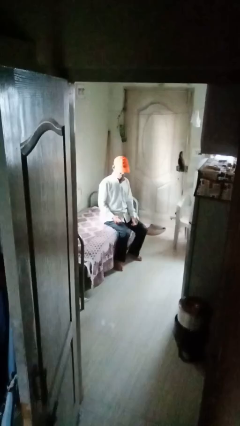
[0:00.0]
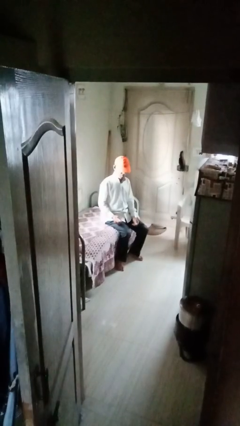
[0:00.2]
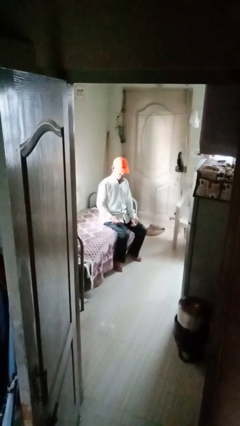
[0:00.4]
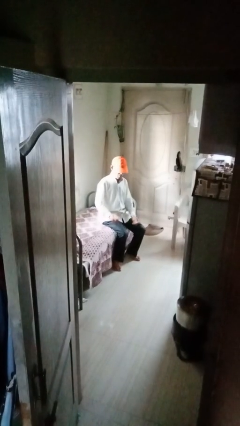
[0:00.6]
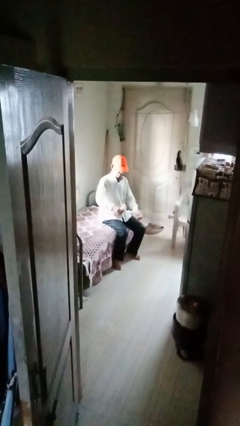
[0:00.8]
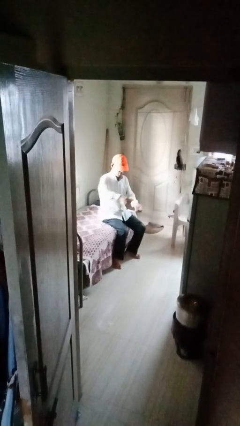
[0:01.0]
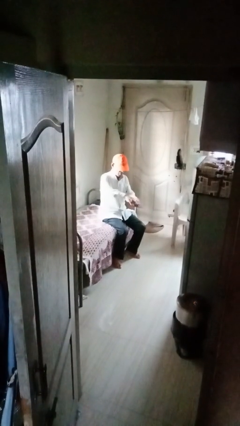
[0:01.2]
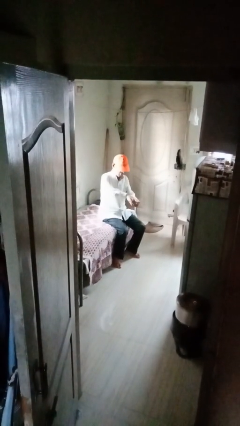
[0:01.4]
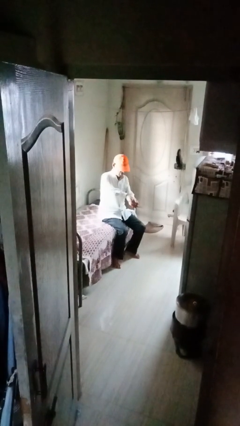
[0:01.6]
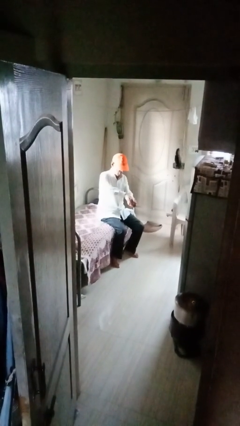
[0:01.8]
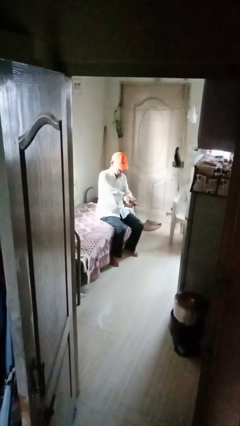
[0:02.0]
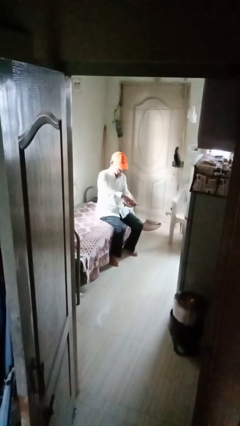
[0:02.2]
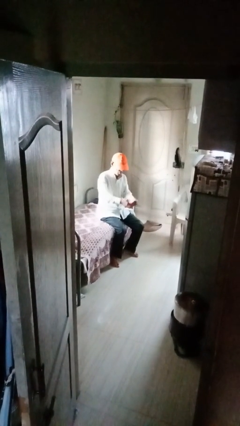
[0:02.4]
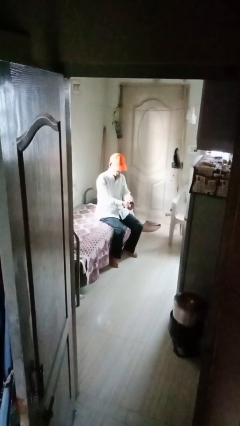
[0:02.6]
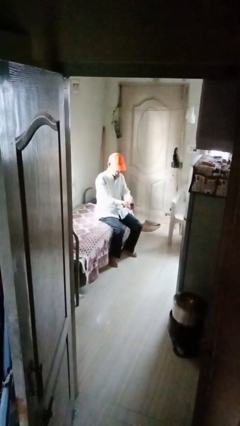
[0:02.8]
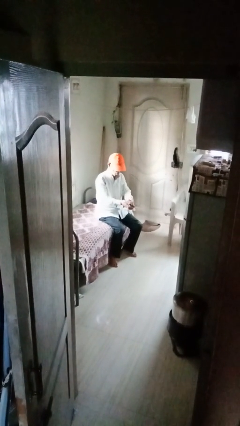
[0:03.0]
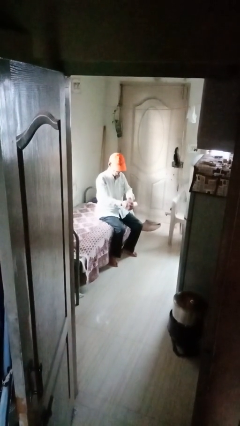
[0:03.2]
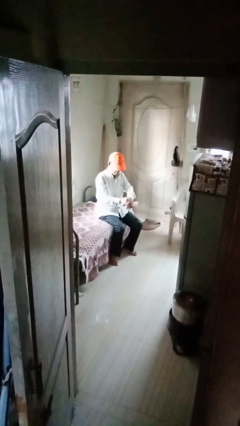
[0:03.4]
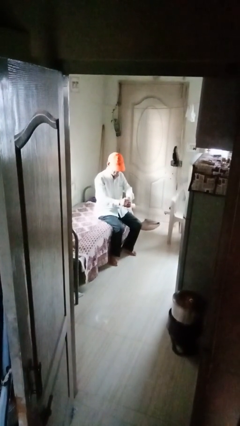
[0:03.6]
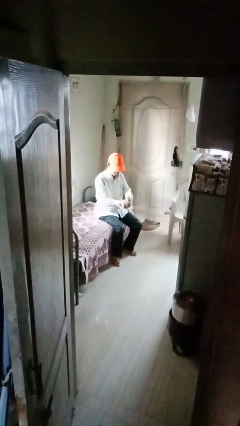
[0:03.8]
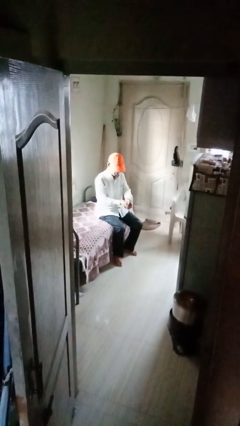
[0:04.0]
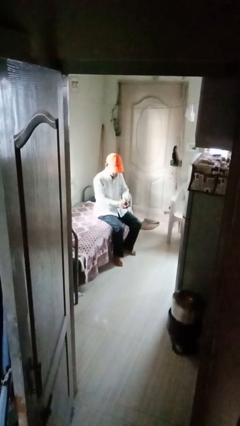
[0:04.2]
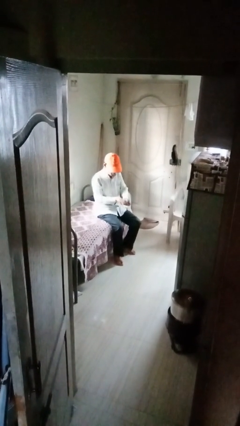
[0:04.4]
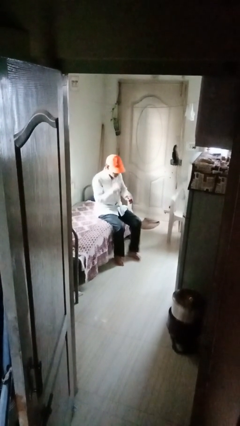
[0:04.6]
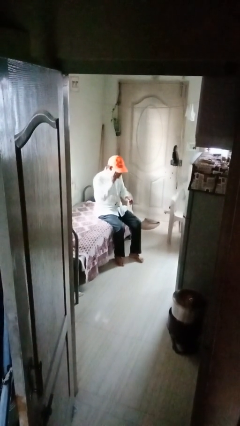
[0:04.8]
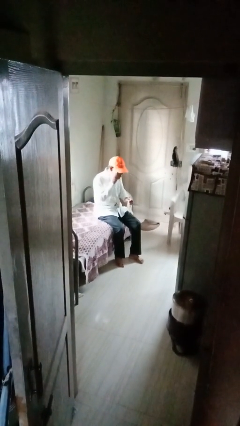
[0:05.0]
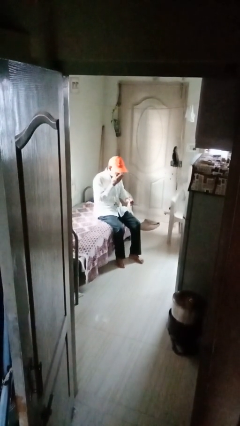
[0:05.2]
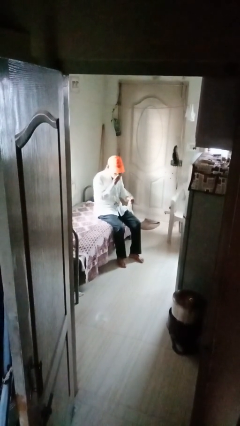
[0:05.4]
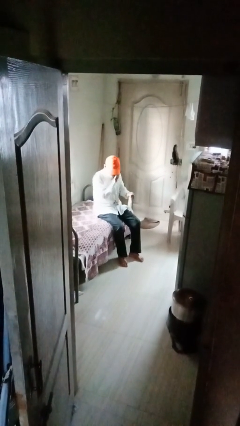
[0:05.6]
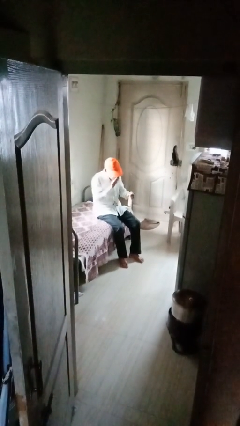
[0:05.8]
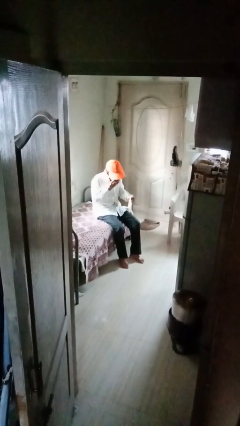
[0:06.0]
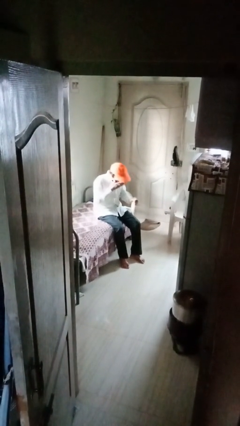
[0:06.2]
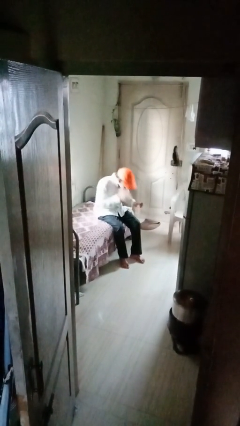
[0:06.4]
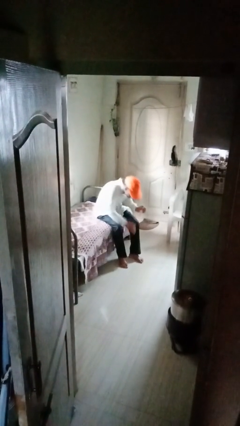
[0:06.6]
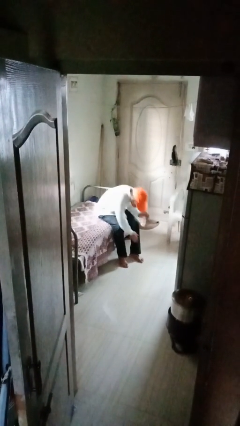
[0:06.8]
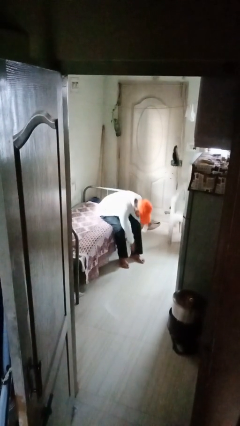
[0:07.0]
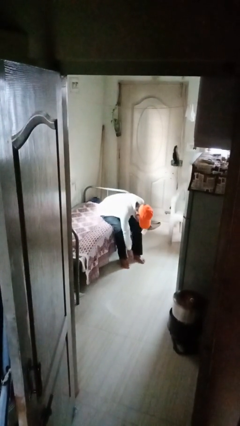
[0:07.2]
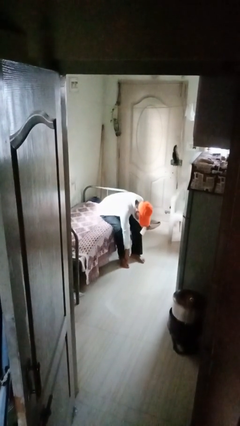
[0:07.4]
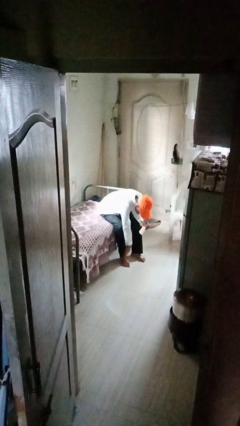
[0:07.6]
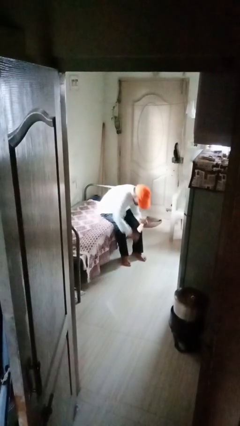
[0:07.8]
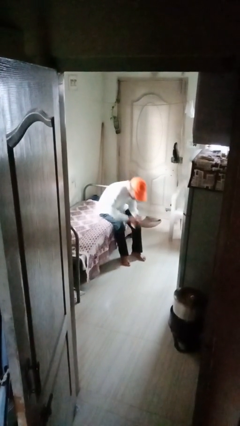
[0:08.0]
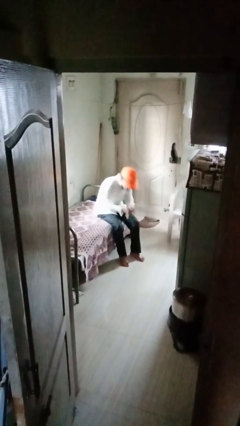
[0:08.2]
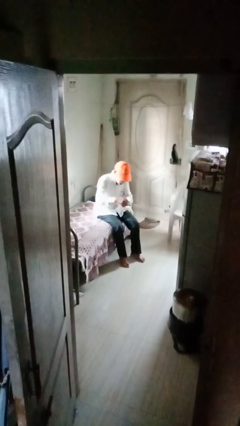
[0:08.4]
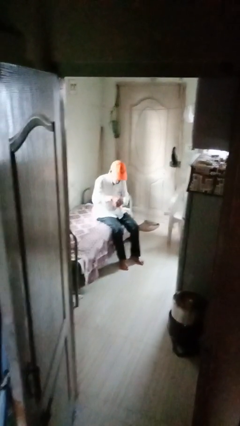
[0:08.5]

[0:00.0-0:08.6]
person applies facial moisturizer

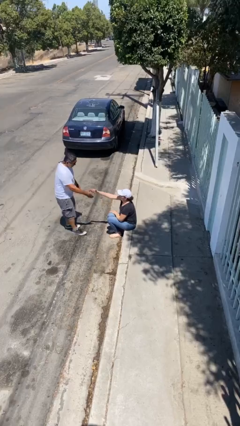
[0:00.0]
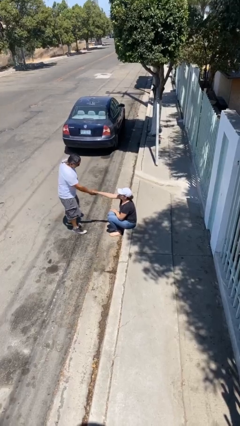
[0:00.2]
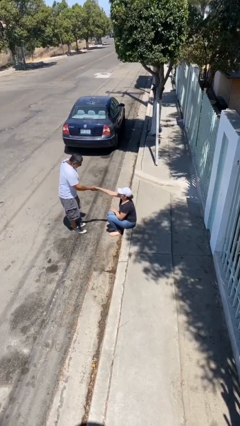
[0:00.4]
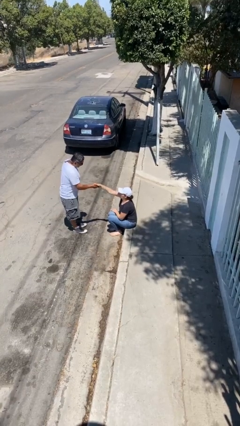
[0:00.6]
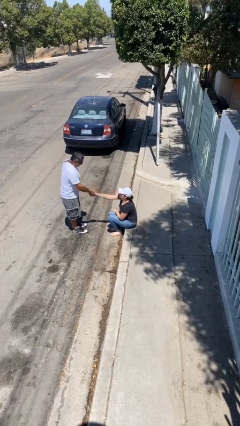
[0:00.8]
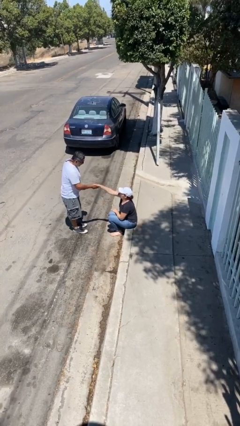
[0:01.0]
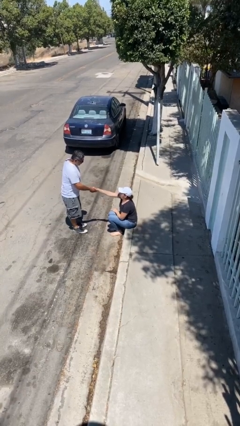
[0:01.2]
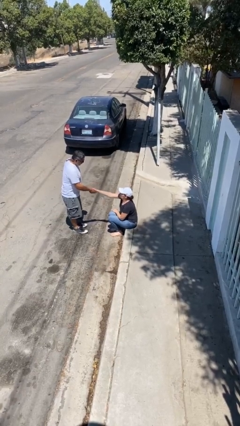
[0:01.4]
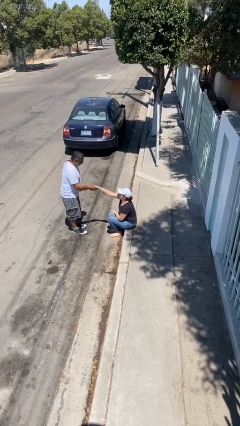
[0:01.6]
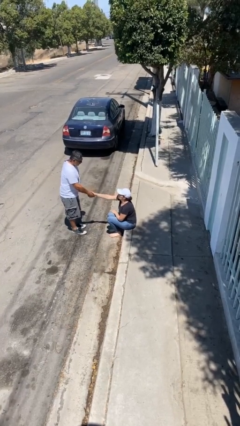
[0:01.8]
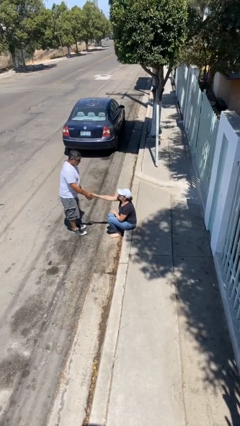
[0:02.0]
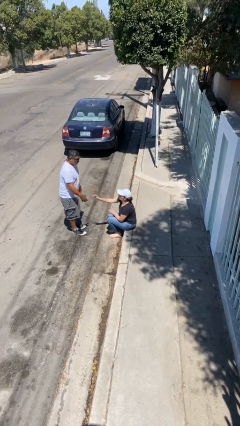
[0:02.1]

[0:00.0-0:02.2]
person shakes hand

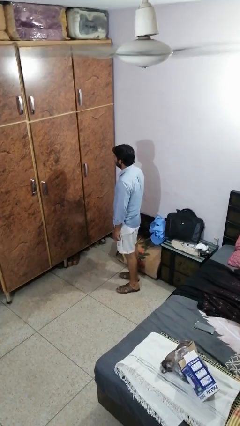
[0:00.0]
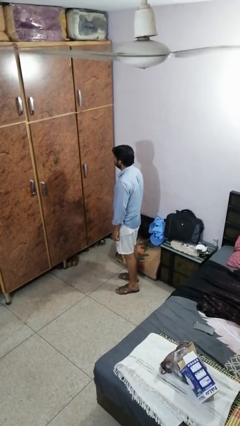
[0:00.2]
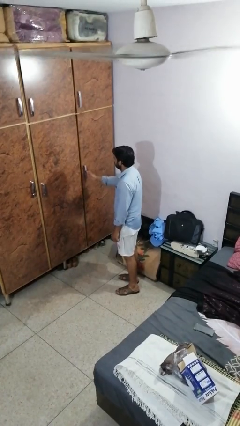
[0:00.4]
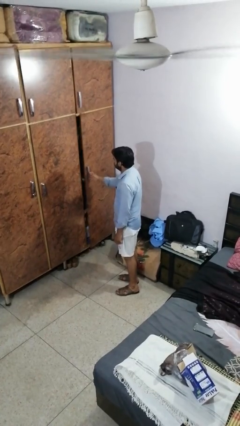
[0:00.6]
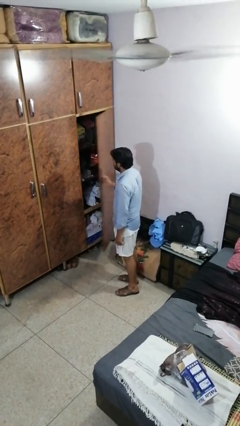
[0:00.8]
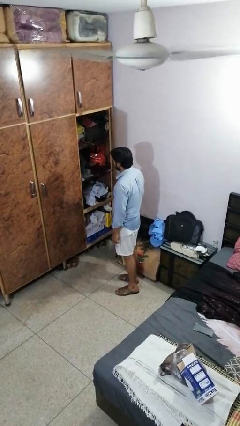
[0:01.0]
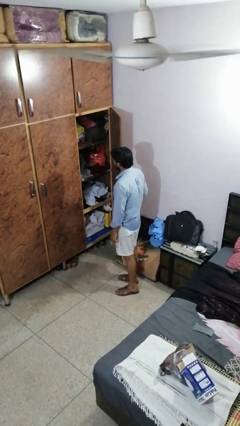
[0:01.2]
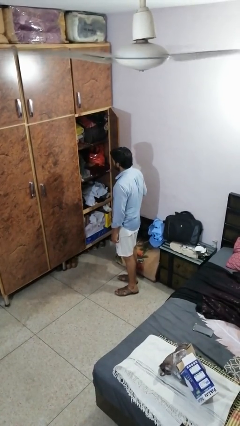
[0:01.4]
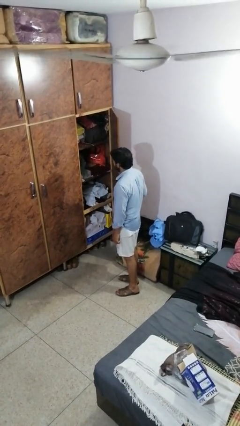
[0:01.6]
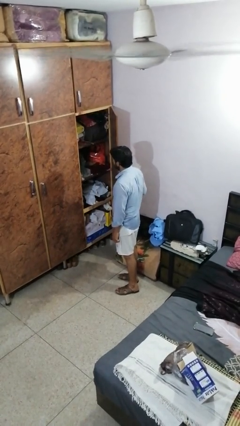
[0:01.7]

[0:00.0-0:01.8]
person opens closet door

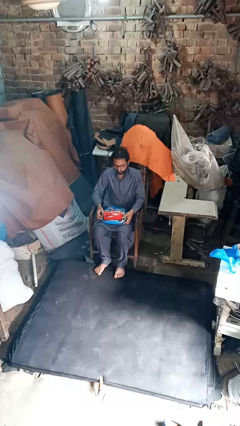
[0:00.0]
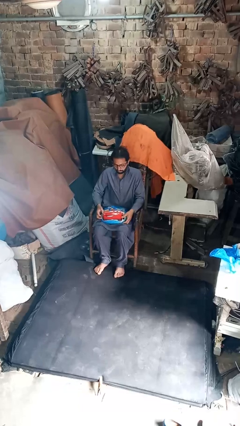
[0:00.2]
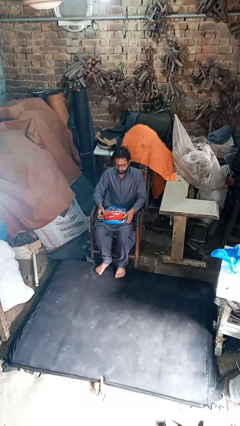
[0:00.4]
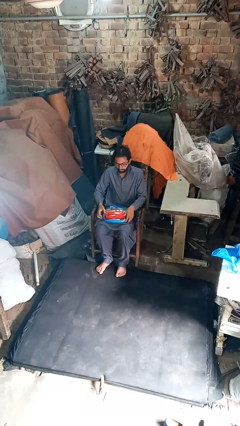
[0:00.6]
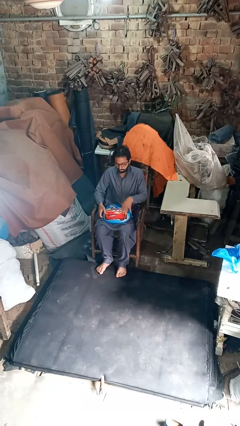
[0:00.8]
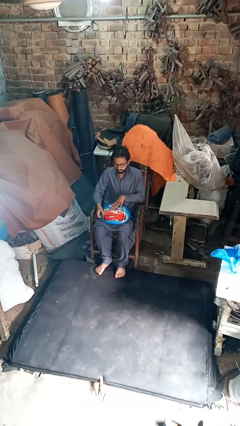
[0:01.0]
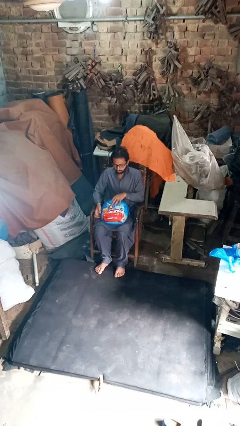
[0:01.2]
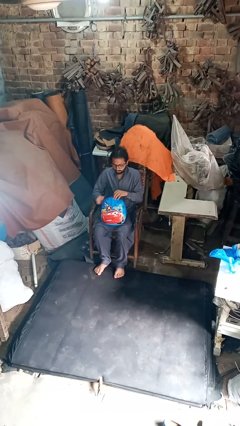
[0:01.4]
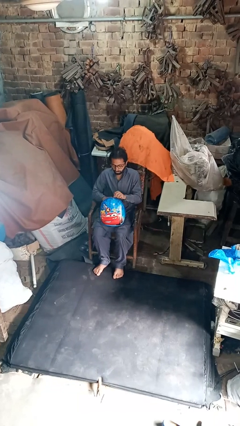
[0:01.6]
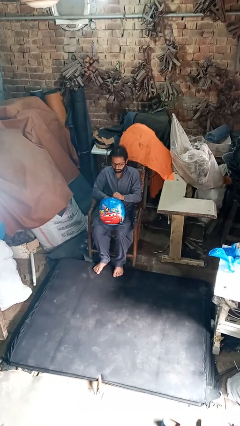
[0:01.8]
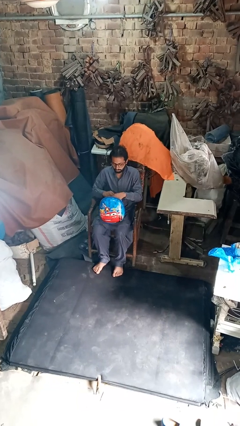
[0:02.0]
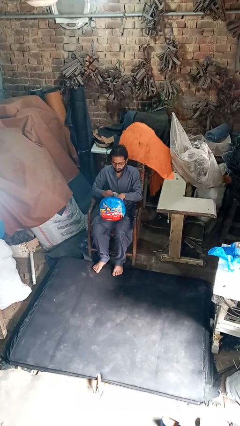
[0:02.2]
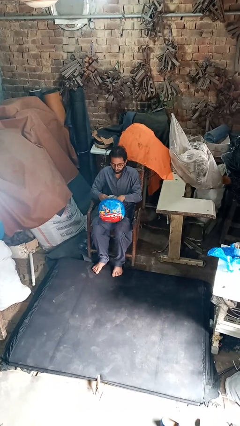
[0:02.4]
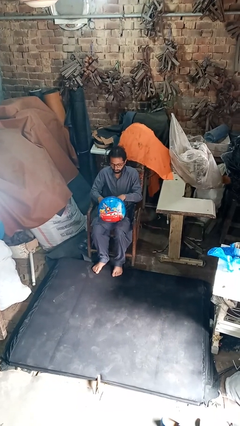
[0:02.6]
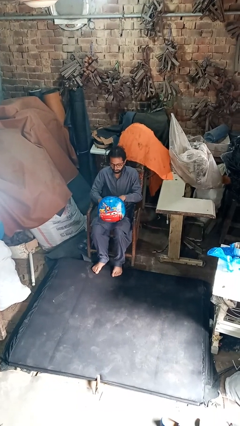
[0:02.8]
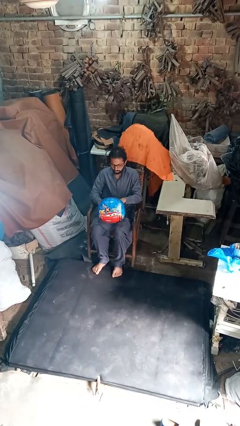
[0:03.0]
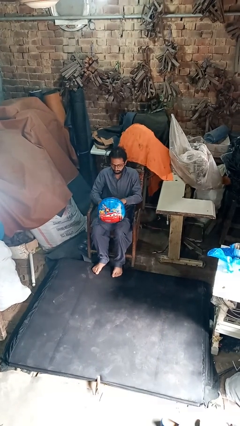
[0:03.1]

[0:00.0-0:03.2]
person searches in purse

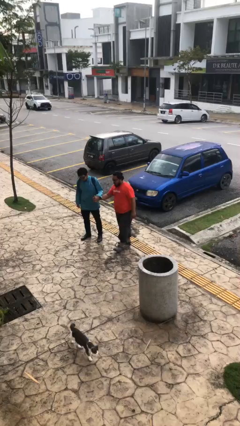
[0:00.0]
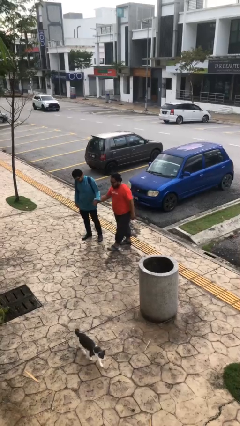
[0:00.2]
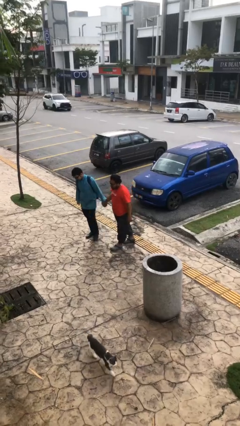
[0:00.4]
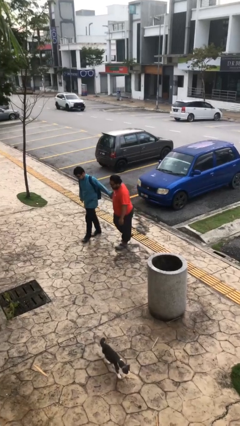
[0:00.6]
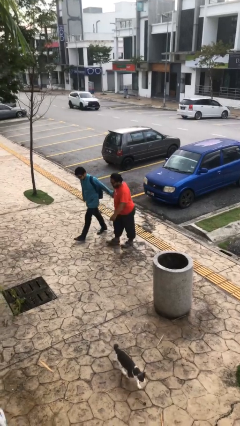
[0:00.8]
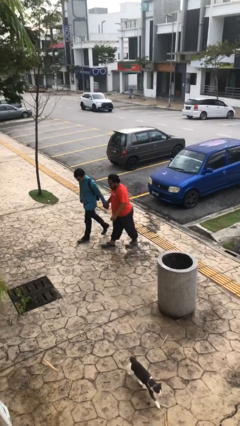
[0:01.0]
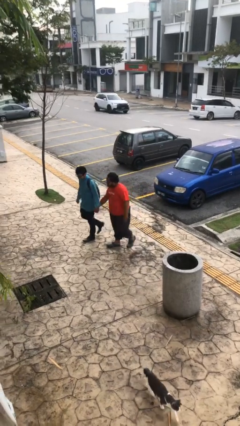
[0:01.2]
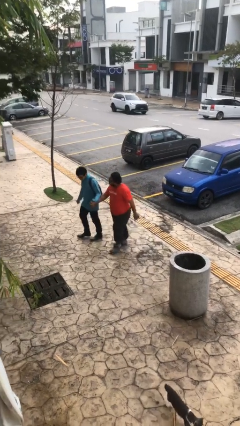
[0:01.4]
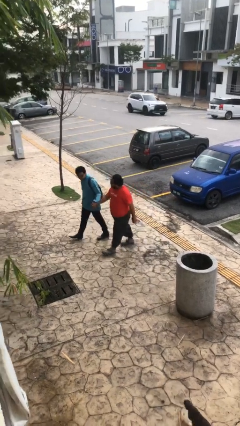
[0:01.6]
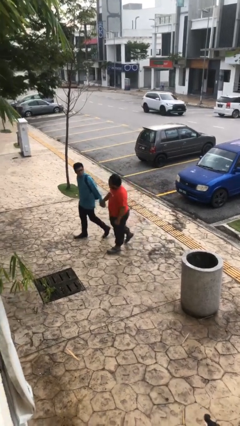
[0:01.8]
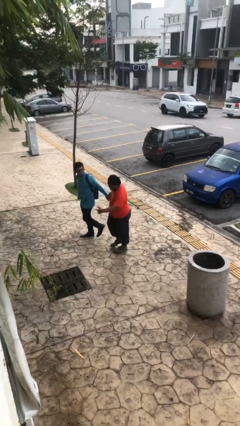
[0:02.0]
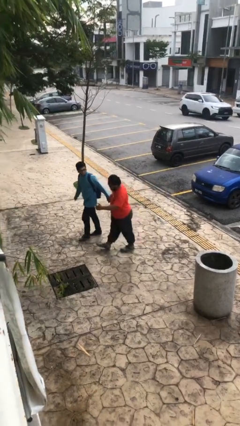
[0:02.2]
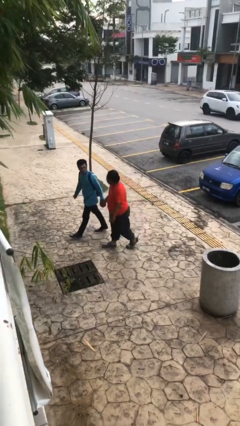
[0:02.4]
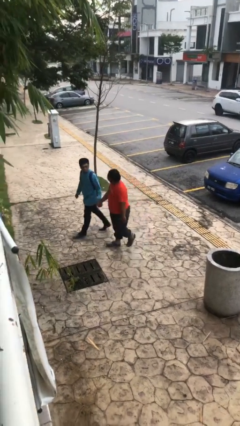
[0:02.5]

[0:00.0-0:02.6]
person holds hand
